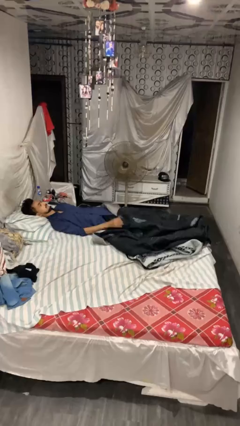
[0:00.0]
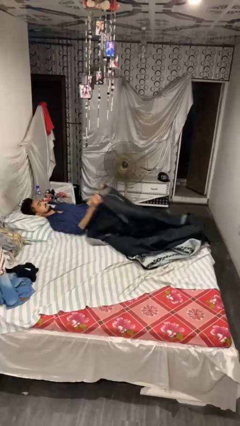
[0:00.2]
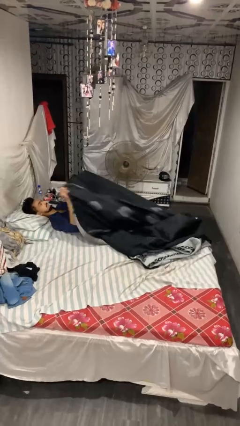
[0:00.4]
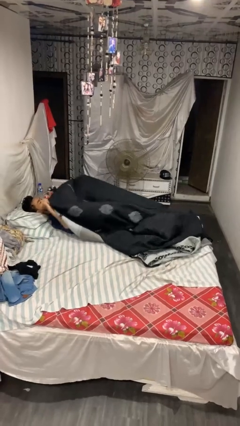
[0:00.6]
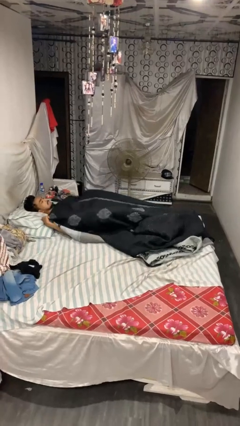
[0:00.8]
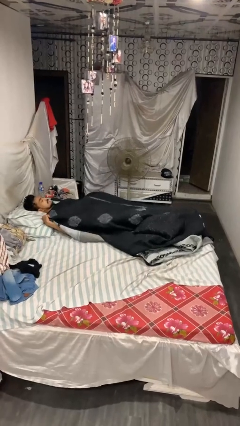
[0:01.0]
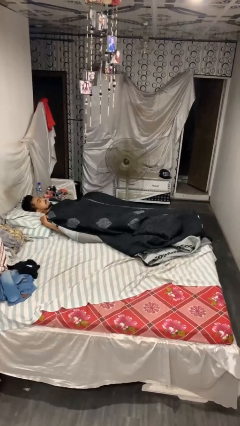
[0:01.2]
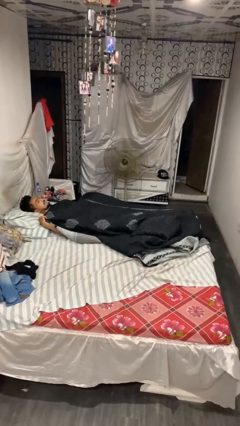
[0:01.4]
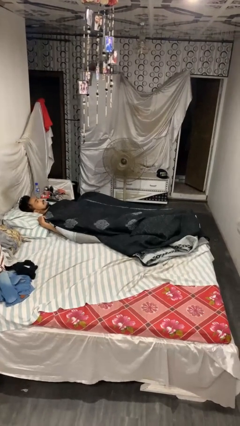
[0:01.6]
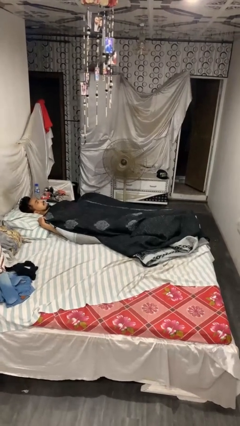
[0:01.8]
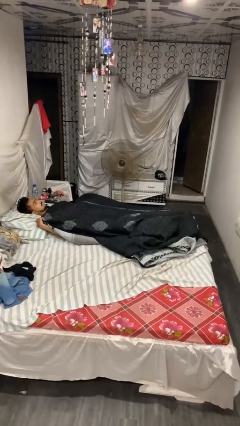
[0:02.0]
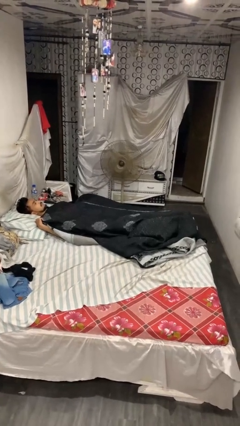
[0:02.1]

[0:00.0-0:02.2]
person covers with blanket

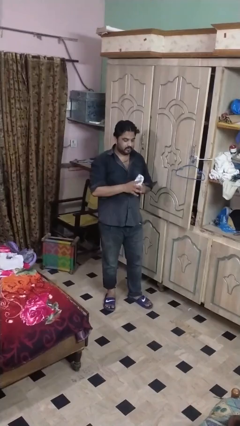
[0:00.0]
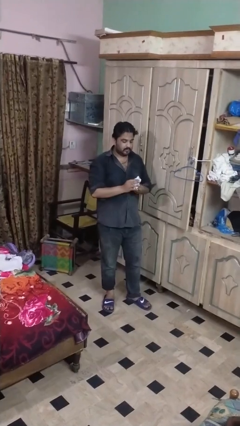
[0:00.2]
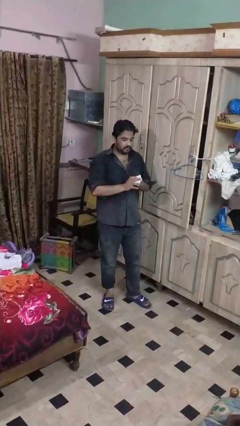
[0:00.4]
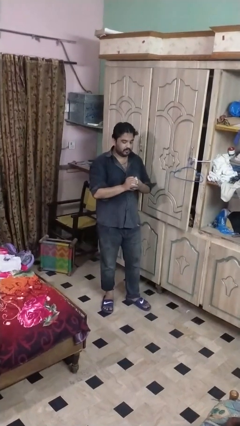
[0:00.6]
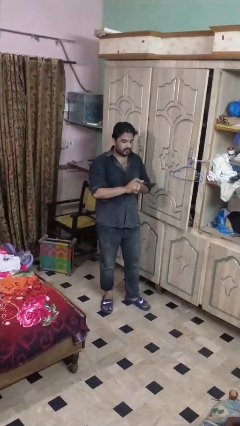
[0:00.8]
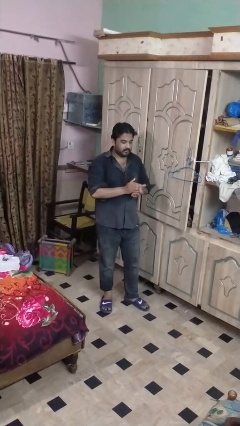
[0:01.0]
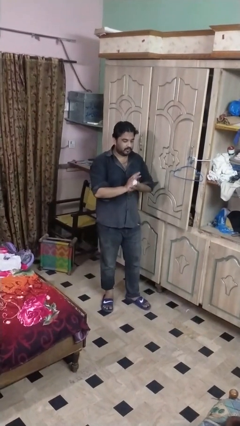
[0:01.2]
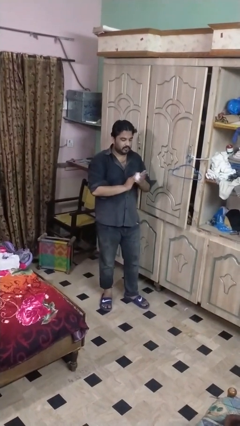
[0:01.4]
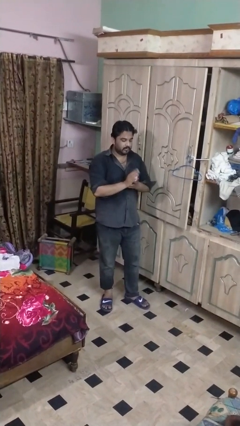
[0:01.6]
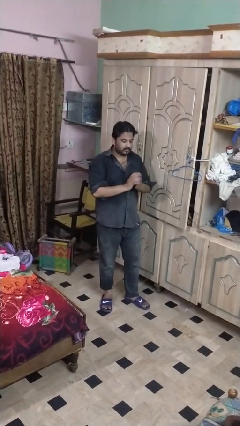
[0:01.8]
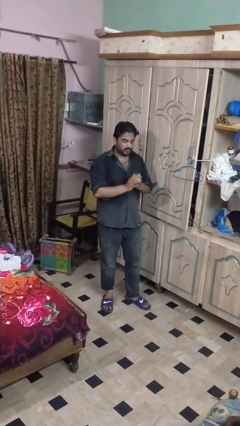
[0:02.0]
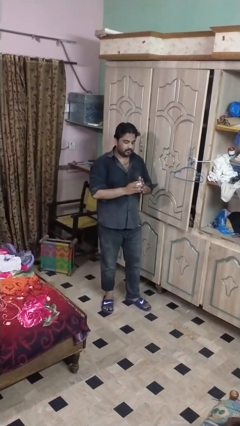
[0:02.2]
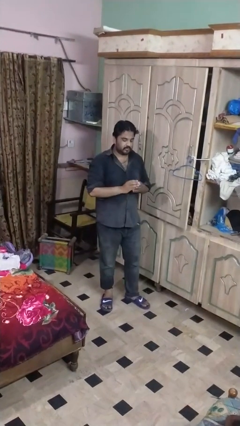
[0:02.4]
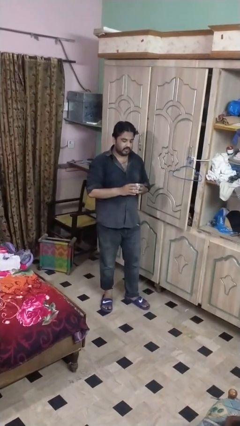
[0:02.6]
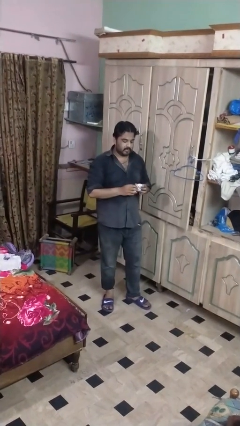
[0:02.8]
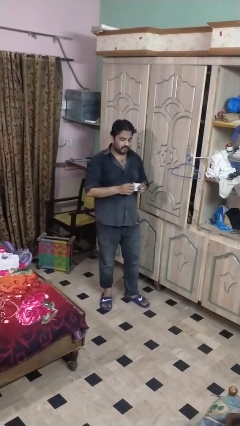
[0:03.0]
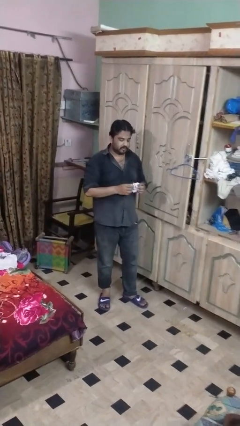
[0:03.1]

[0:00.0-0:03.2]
person crumples paper

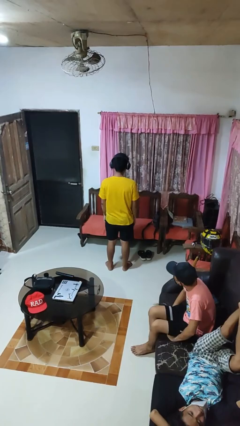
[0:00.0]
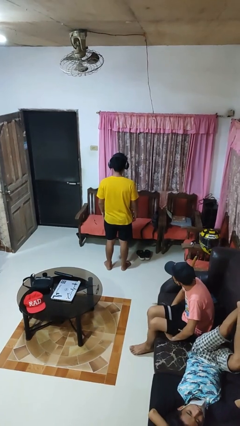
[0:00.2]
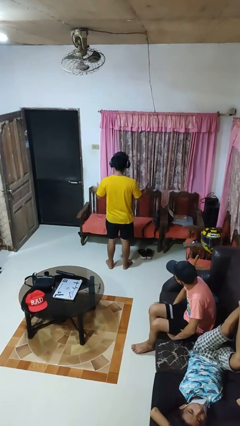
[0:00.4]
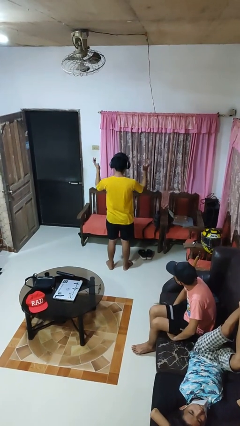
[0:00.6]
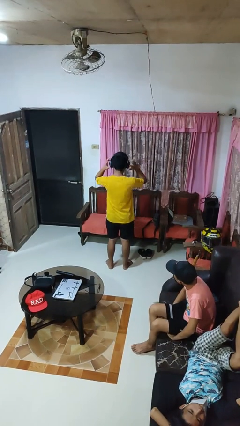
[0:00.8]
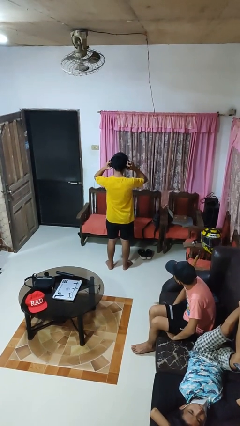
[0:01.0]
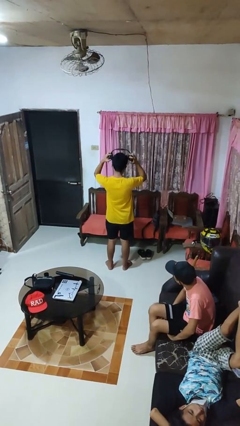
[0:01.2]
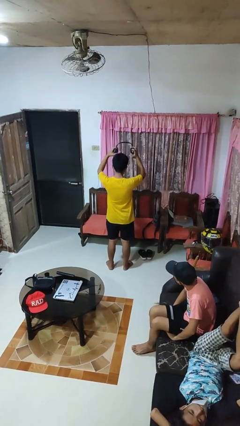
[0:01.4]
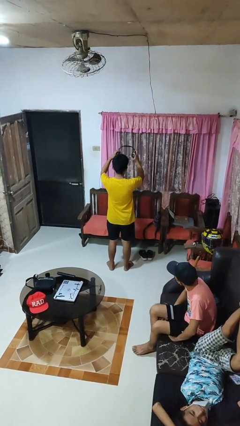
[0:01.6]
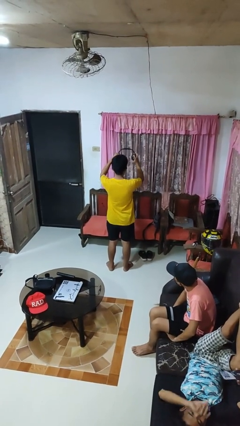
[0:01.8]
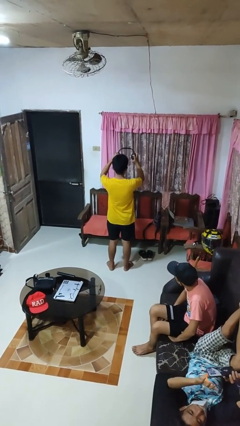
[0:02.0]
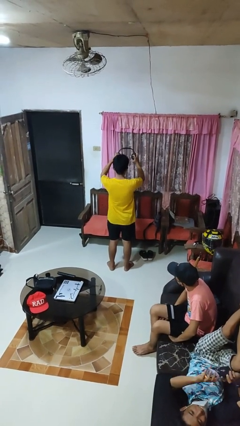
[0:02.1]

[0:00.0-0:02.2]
person takes off headphones

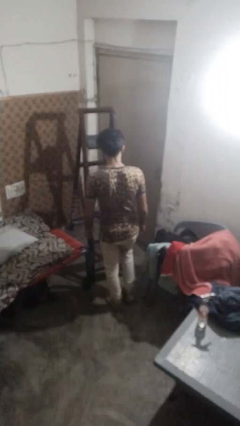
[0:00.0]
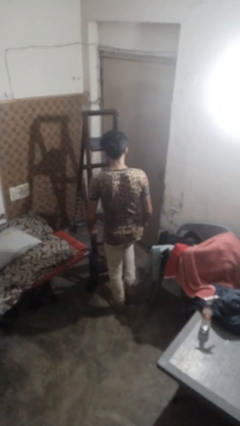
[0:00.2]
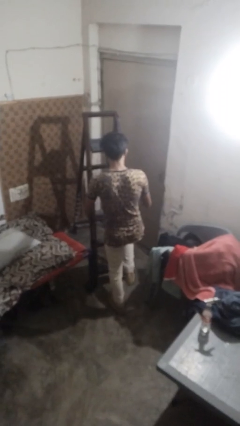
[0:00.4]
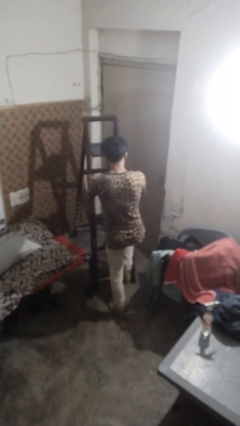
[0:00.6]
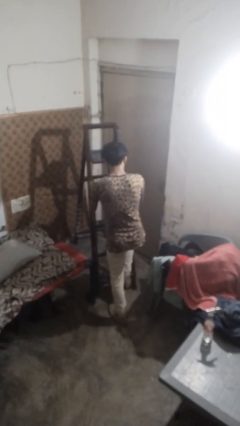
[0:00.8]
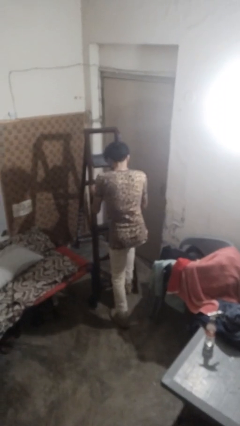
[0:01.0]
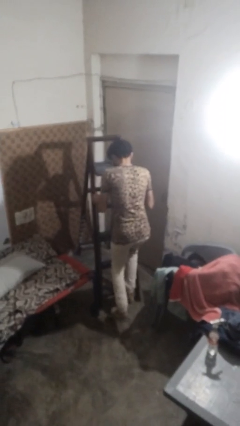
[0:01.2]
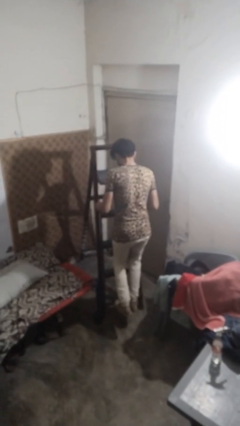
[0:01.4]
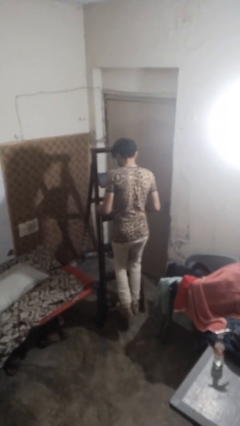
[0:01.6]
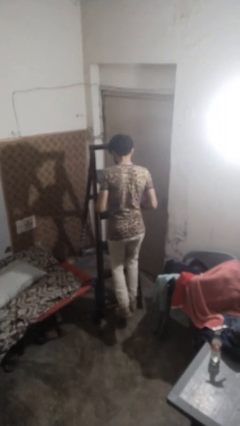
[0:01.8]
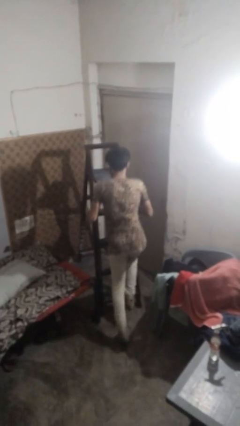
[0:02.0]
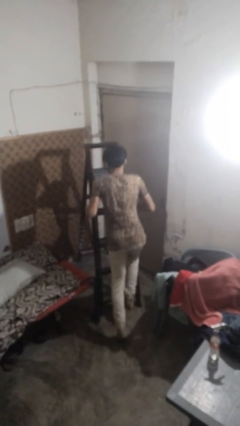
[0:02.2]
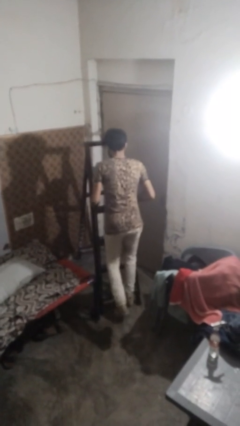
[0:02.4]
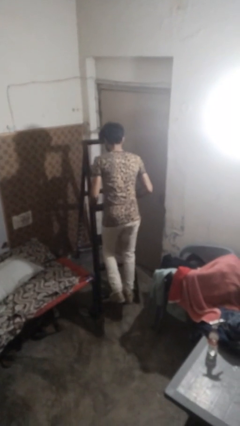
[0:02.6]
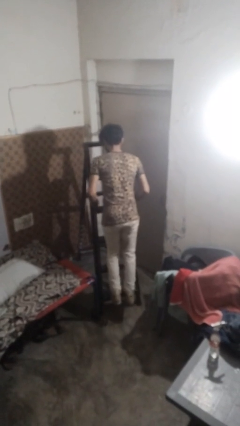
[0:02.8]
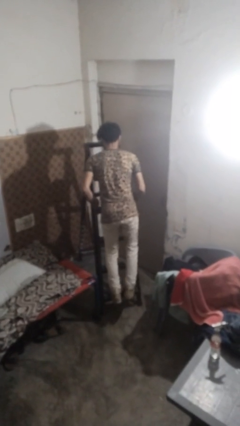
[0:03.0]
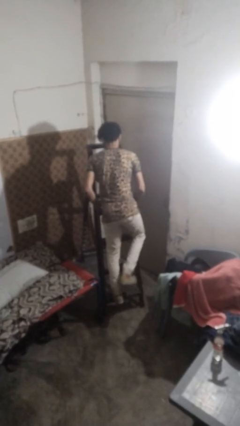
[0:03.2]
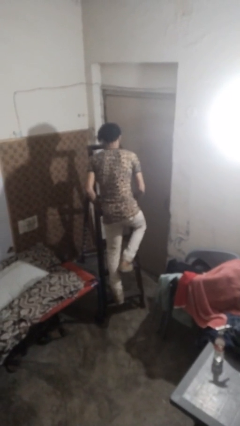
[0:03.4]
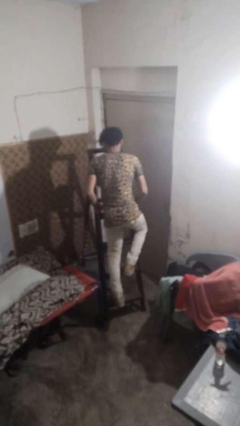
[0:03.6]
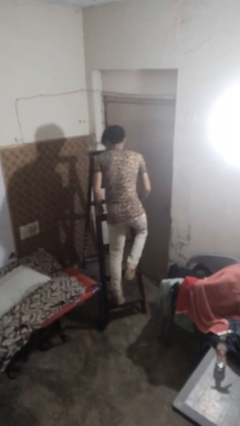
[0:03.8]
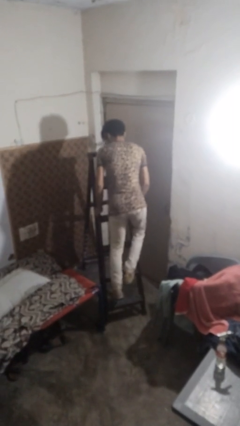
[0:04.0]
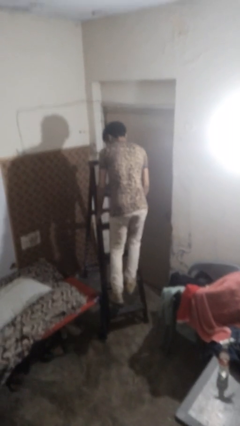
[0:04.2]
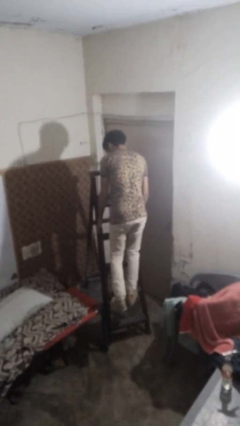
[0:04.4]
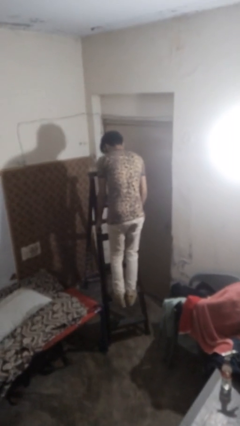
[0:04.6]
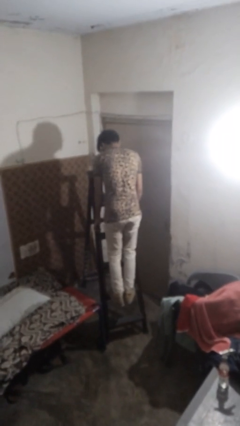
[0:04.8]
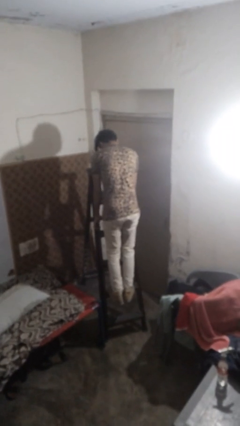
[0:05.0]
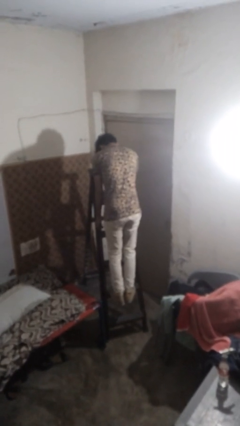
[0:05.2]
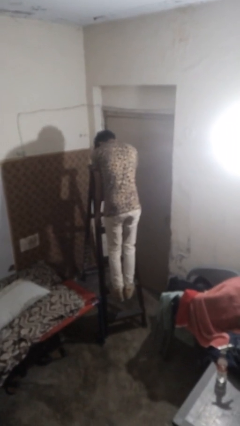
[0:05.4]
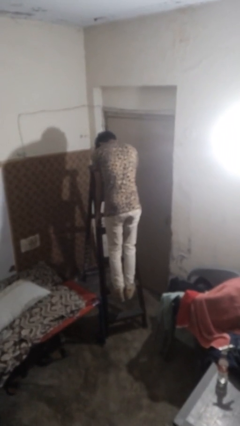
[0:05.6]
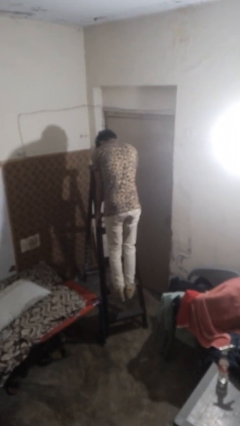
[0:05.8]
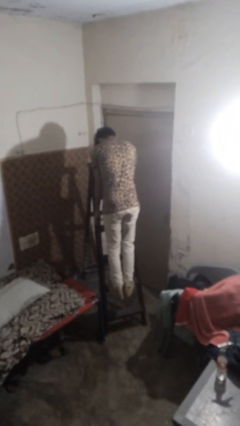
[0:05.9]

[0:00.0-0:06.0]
person climbs up ladder

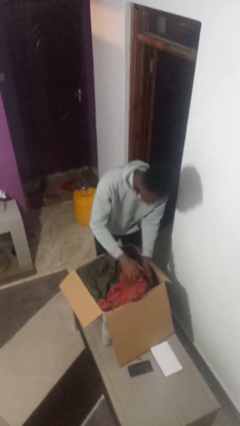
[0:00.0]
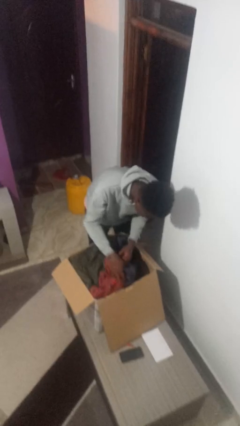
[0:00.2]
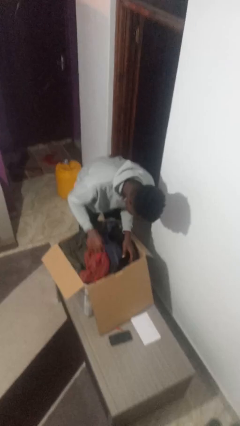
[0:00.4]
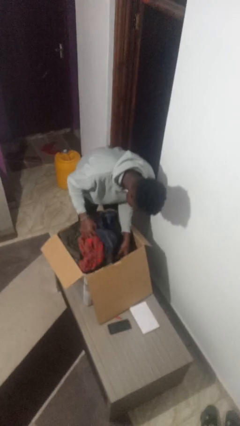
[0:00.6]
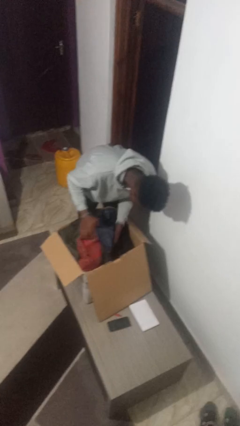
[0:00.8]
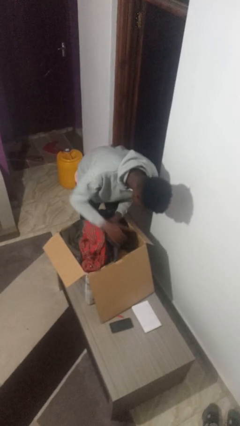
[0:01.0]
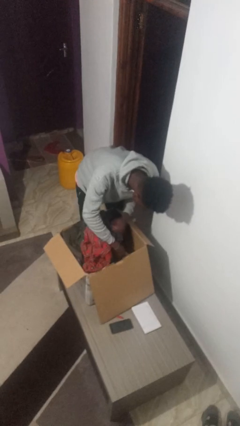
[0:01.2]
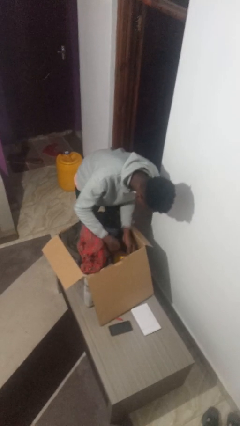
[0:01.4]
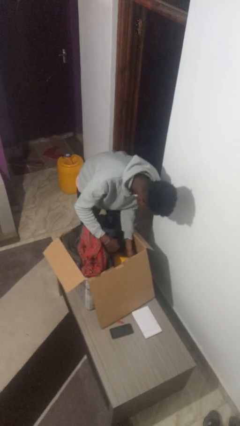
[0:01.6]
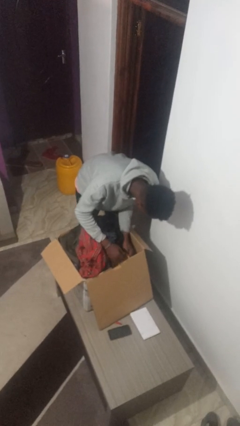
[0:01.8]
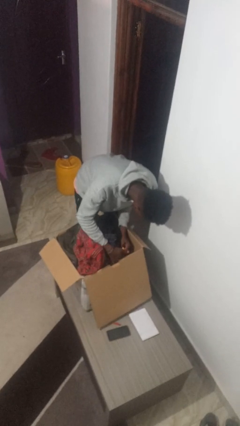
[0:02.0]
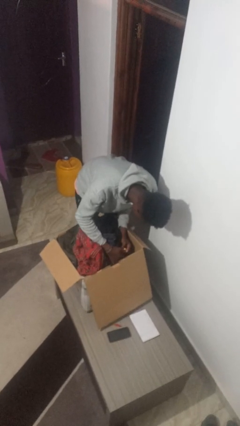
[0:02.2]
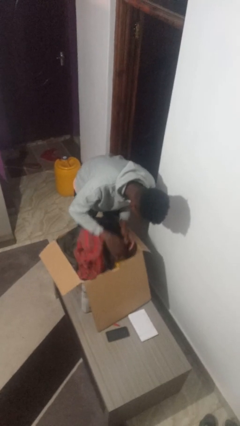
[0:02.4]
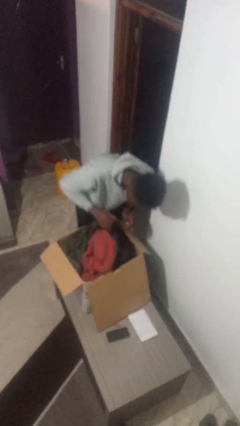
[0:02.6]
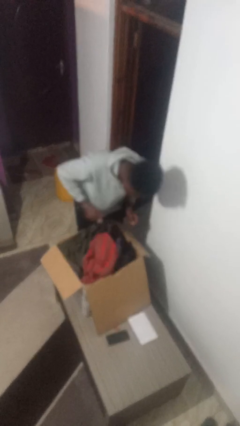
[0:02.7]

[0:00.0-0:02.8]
person searches in box

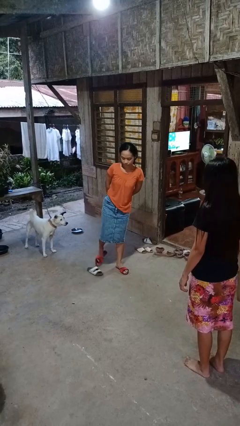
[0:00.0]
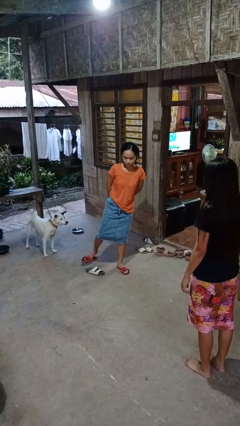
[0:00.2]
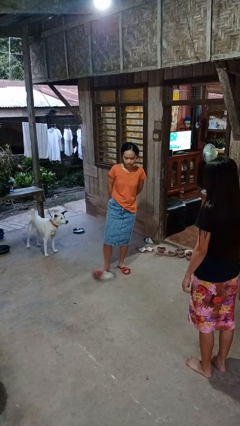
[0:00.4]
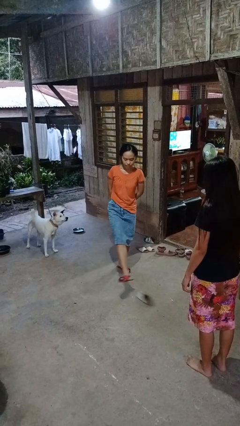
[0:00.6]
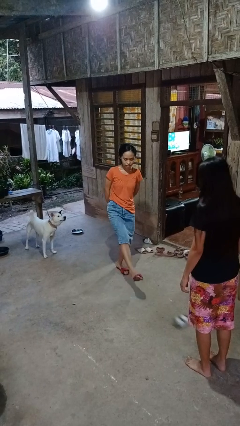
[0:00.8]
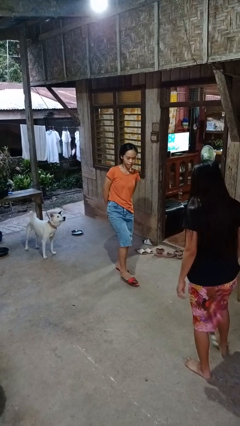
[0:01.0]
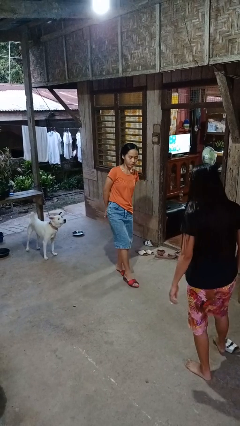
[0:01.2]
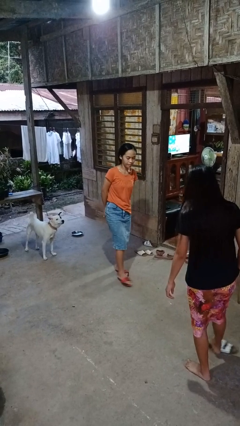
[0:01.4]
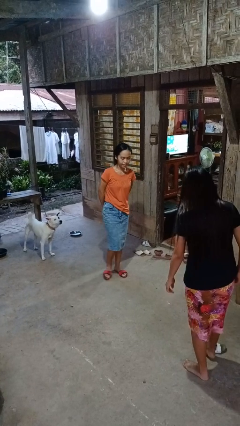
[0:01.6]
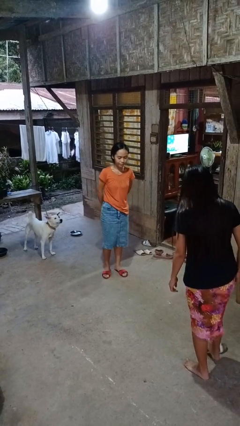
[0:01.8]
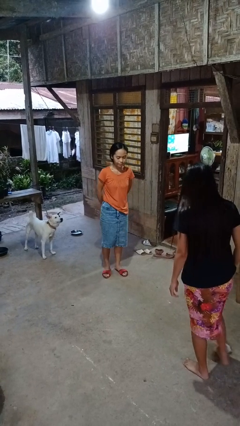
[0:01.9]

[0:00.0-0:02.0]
person kicks object to person
